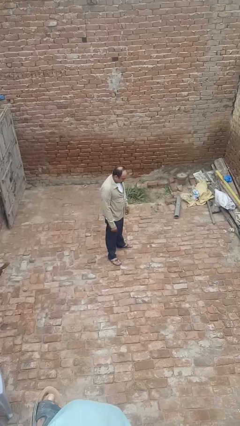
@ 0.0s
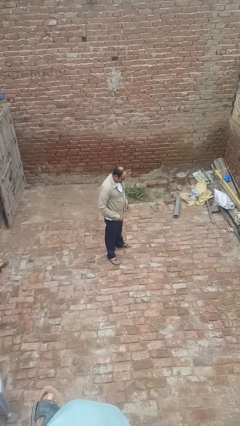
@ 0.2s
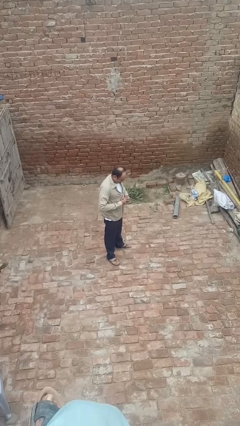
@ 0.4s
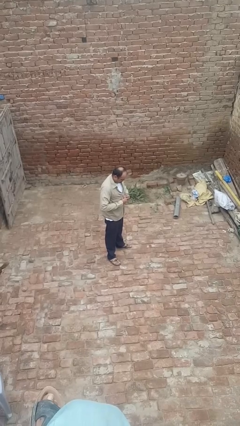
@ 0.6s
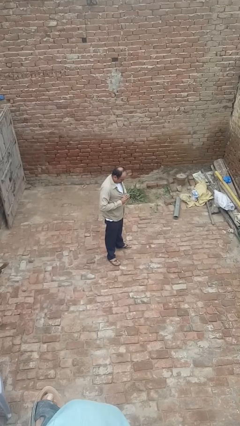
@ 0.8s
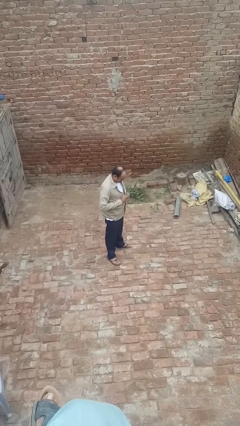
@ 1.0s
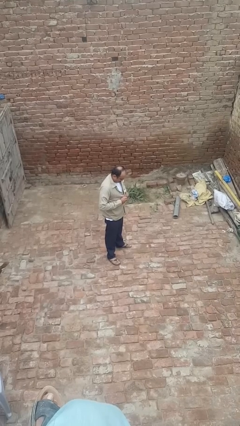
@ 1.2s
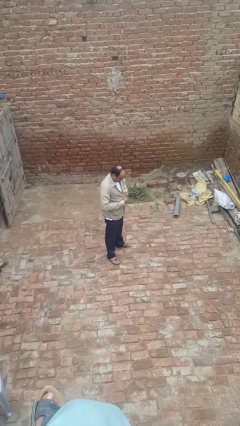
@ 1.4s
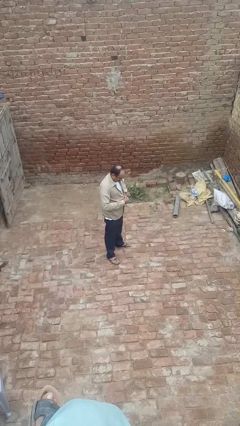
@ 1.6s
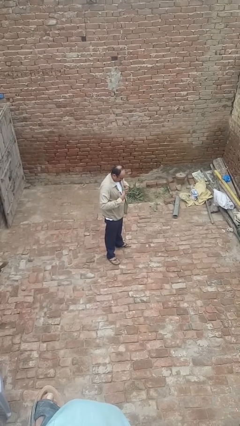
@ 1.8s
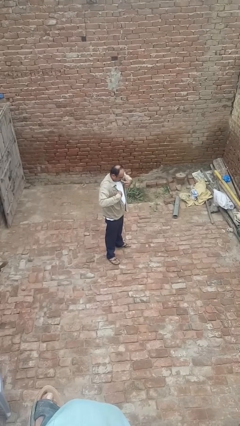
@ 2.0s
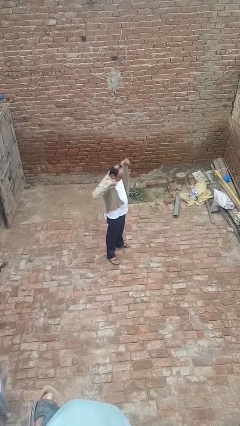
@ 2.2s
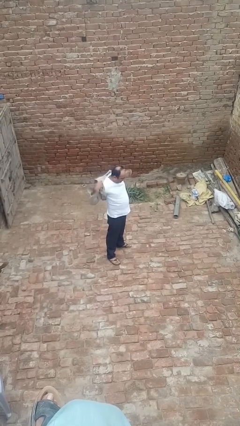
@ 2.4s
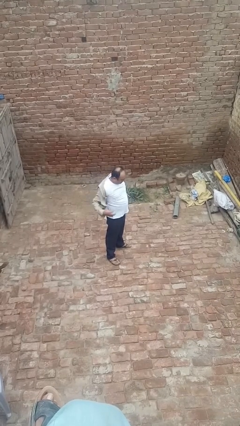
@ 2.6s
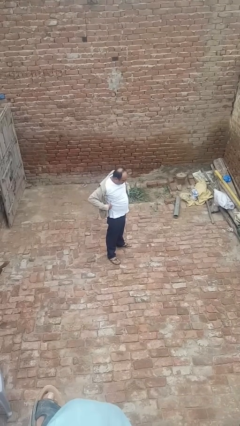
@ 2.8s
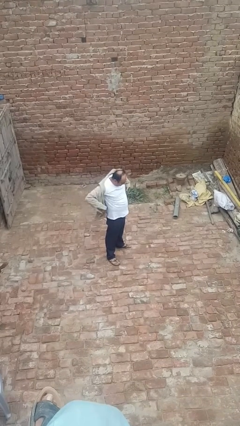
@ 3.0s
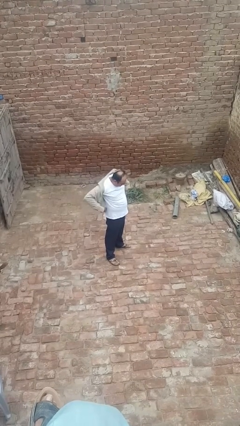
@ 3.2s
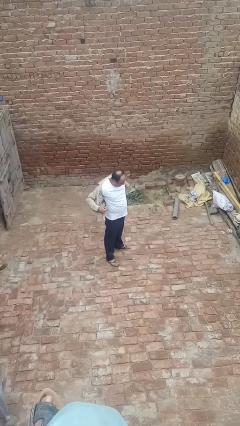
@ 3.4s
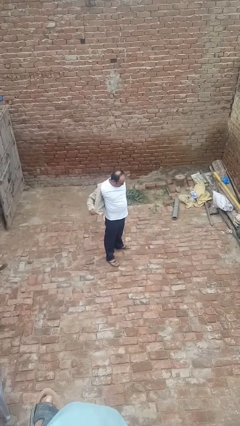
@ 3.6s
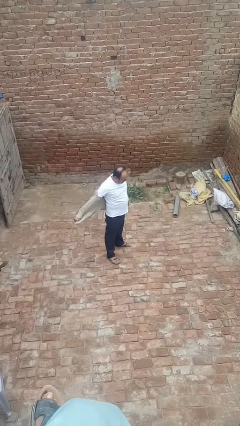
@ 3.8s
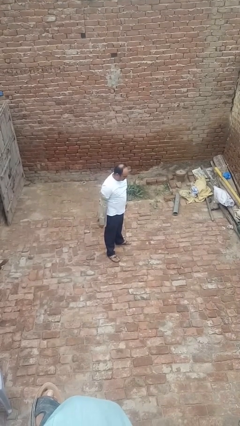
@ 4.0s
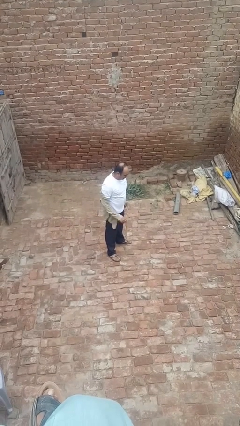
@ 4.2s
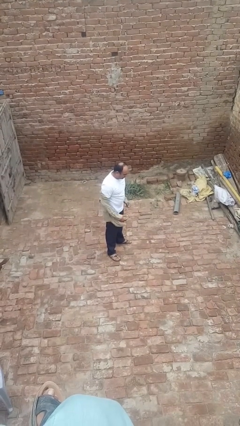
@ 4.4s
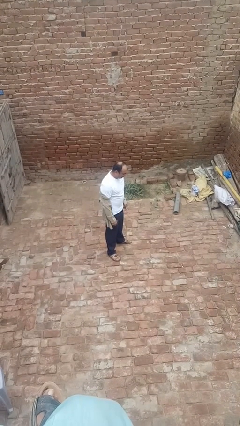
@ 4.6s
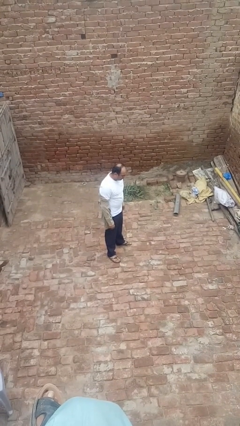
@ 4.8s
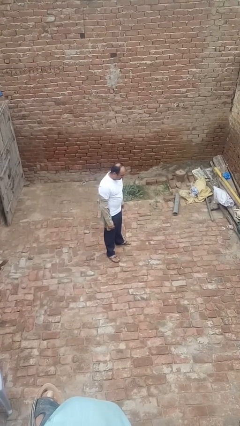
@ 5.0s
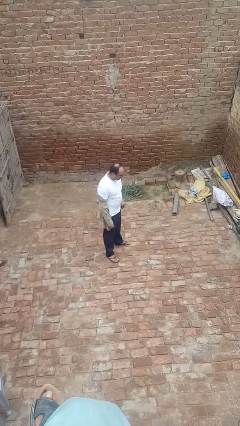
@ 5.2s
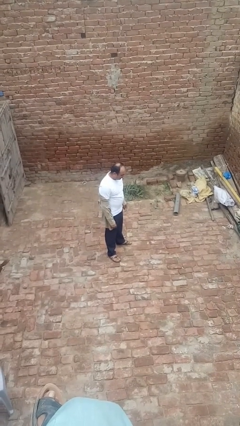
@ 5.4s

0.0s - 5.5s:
person takes off shirt

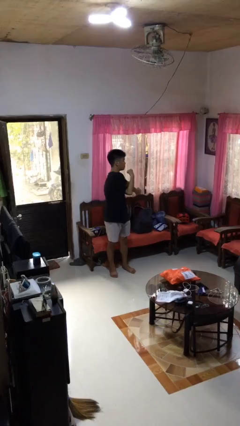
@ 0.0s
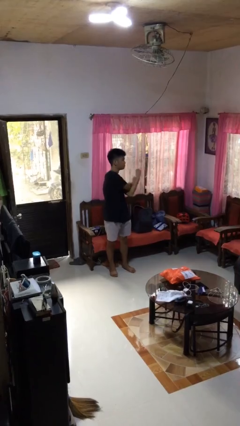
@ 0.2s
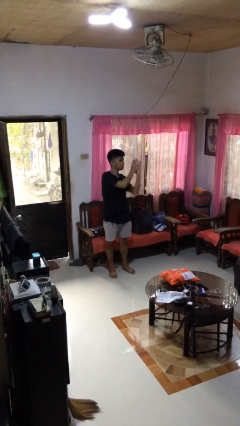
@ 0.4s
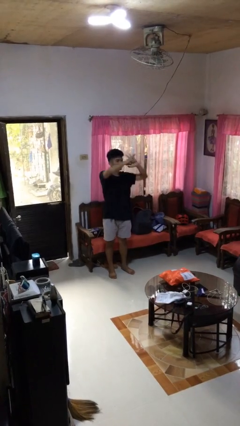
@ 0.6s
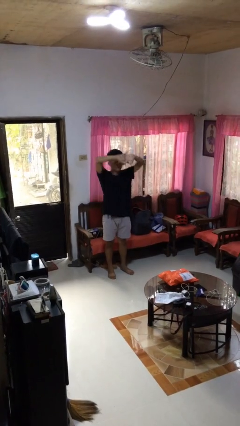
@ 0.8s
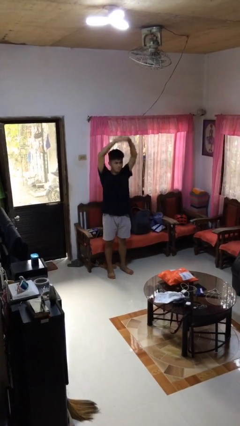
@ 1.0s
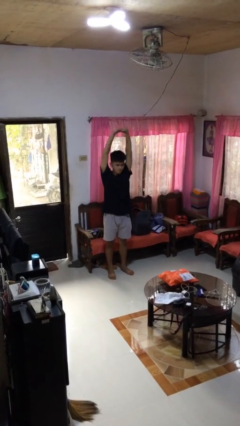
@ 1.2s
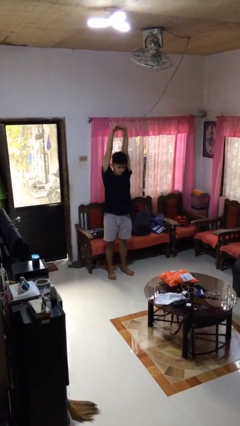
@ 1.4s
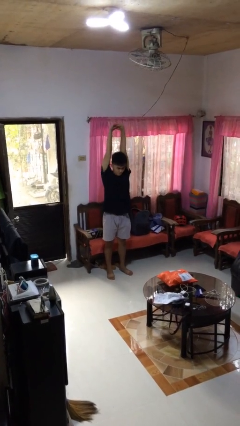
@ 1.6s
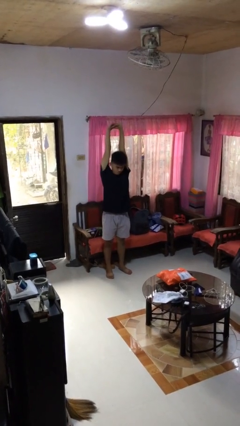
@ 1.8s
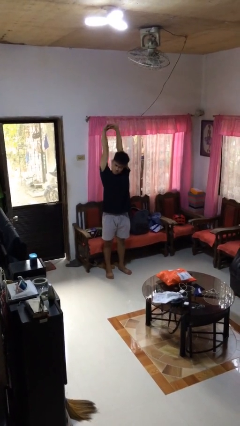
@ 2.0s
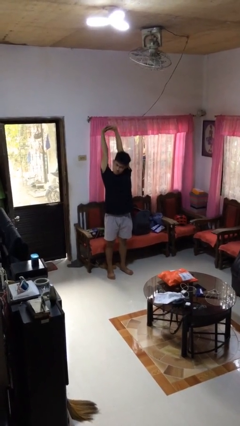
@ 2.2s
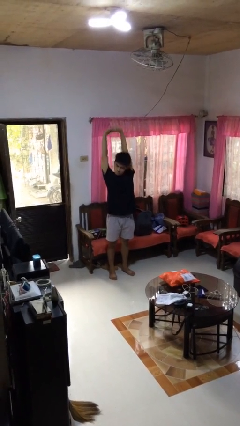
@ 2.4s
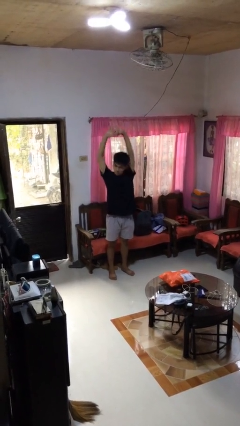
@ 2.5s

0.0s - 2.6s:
person stretches arms over head

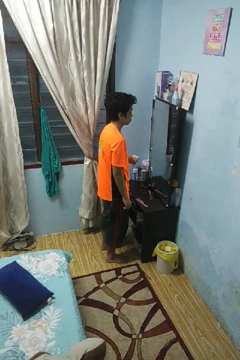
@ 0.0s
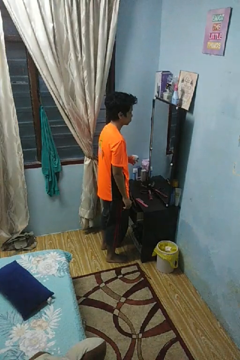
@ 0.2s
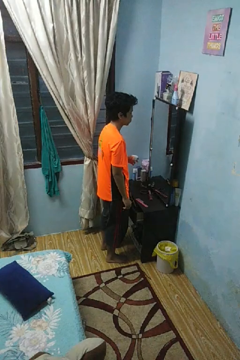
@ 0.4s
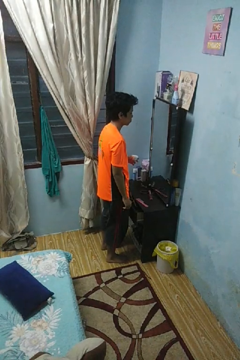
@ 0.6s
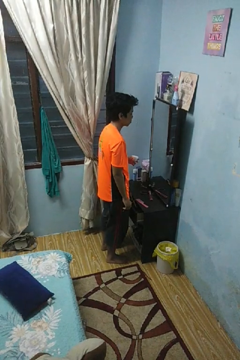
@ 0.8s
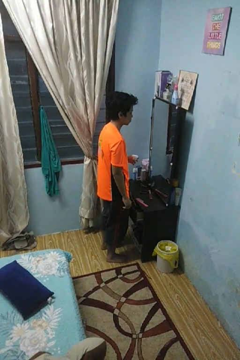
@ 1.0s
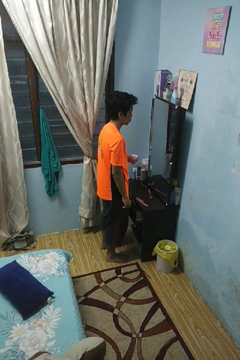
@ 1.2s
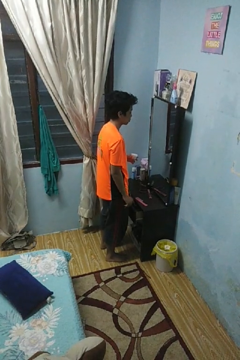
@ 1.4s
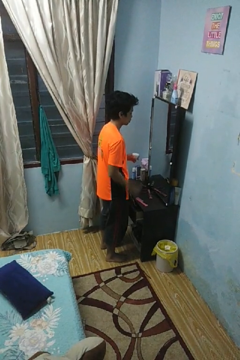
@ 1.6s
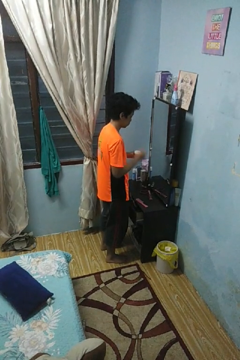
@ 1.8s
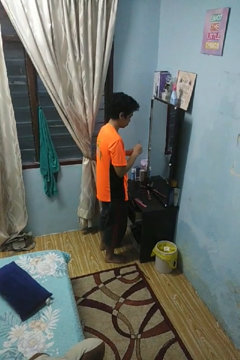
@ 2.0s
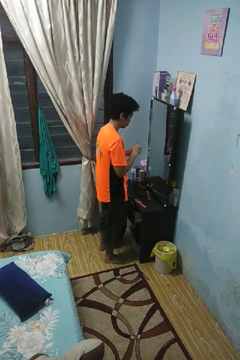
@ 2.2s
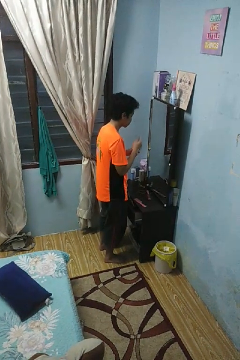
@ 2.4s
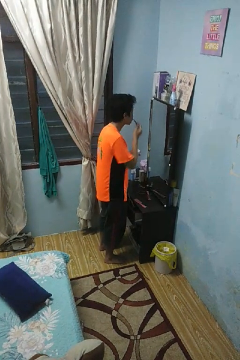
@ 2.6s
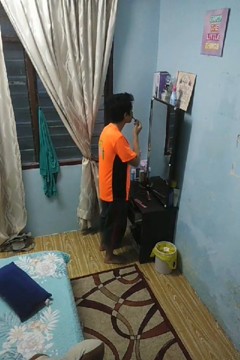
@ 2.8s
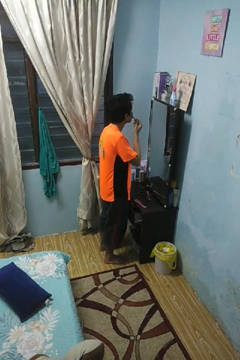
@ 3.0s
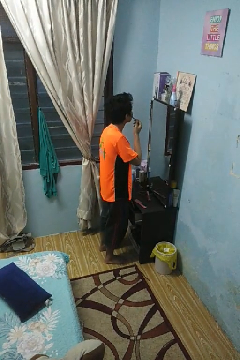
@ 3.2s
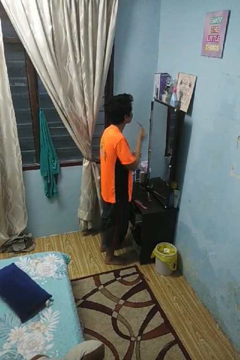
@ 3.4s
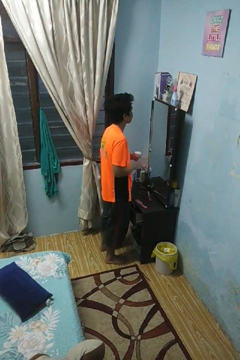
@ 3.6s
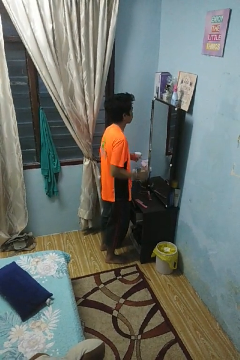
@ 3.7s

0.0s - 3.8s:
person applies foundation makeup

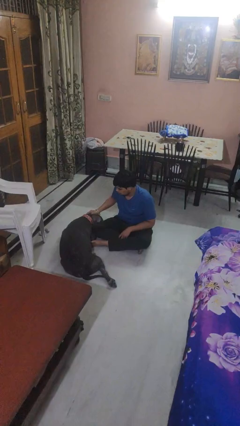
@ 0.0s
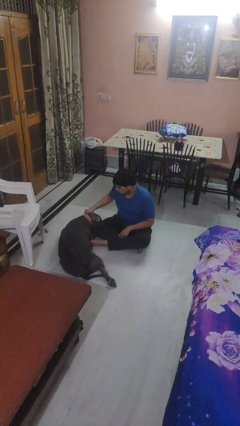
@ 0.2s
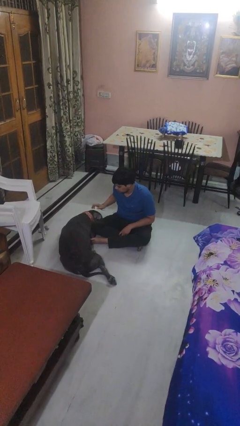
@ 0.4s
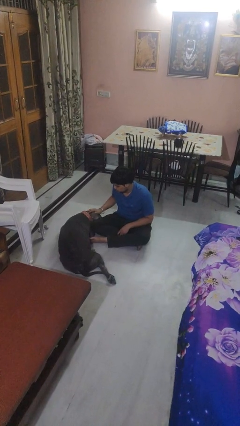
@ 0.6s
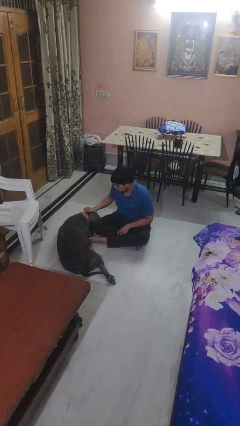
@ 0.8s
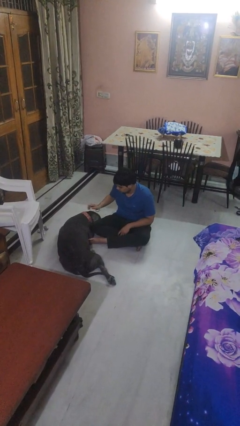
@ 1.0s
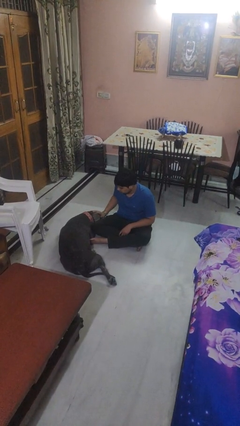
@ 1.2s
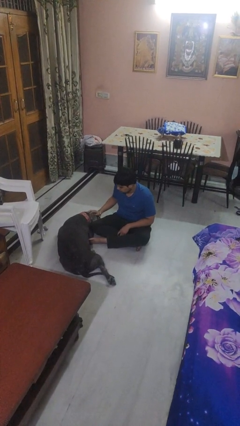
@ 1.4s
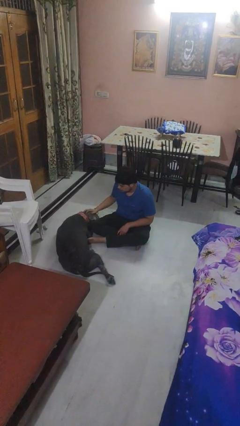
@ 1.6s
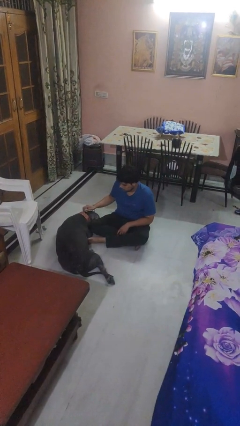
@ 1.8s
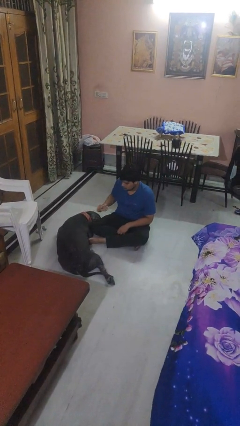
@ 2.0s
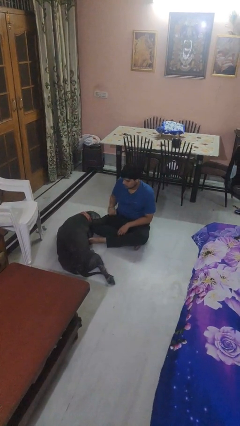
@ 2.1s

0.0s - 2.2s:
person pets dog

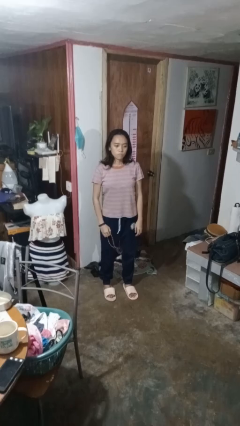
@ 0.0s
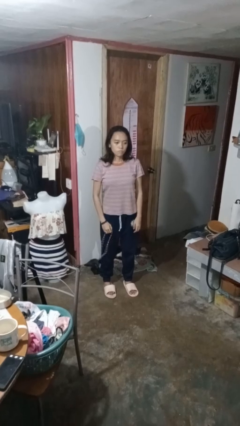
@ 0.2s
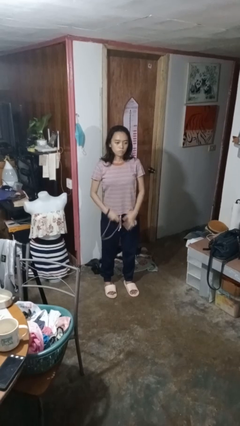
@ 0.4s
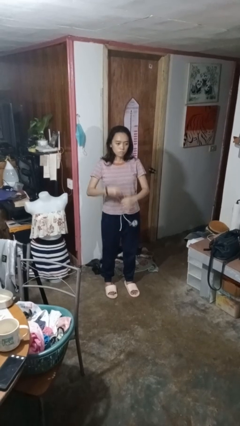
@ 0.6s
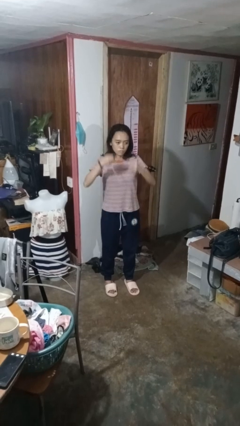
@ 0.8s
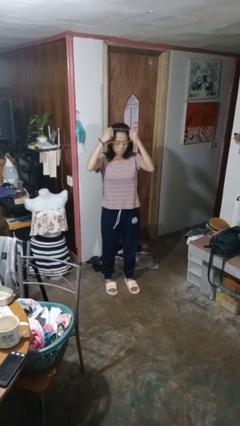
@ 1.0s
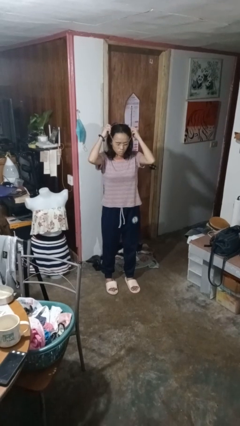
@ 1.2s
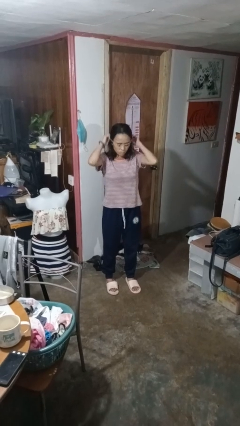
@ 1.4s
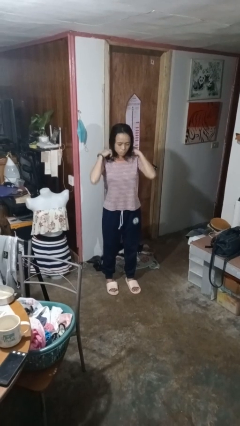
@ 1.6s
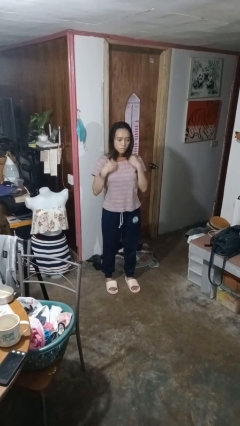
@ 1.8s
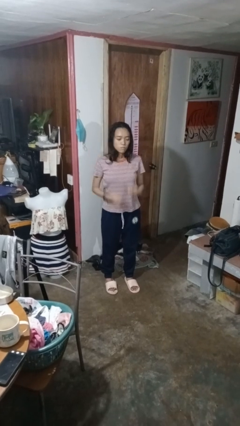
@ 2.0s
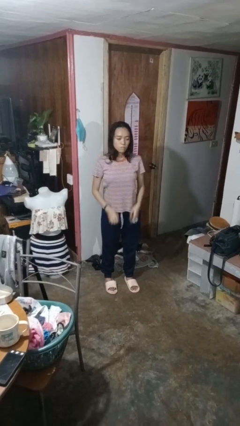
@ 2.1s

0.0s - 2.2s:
person puts on necklace

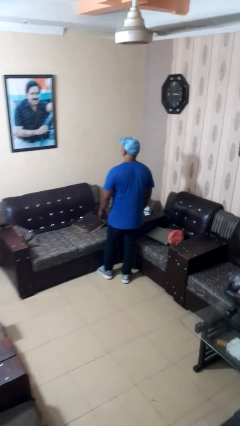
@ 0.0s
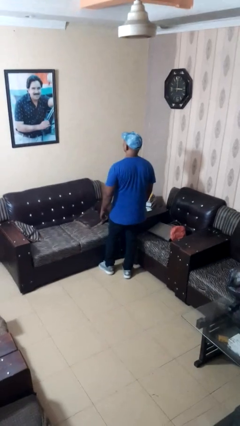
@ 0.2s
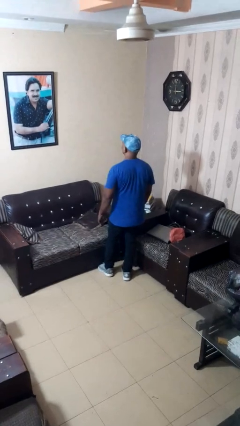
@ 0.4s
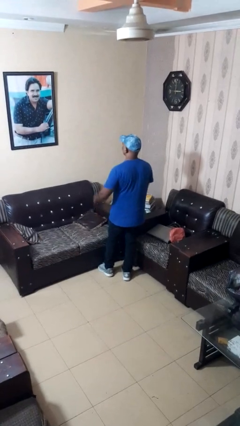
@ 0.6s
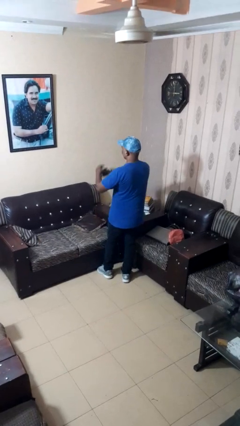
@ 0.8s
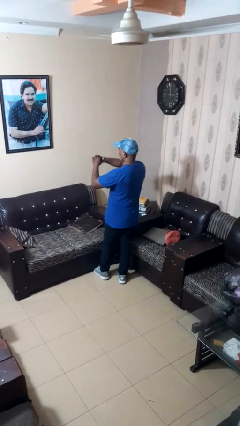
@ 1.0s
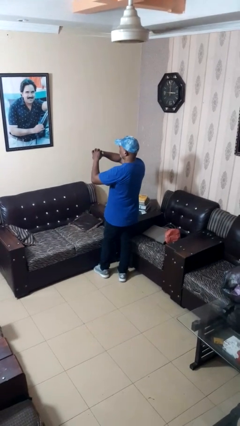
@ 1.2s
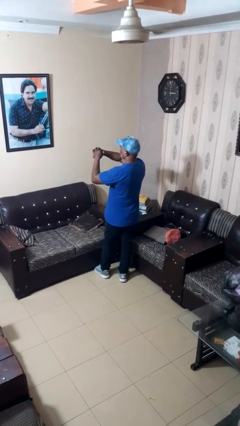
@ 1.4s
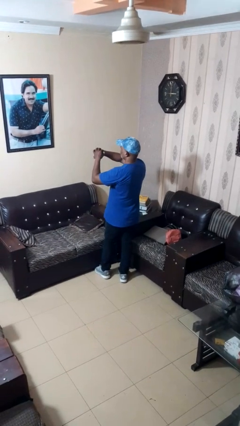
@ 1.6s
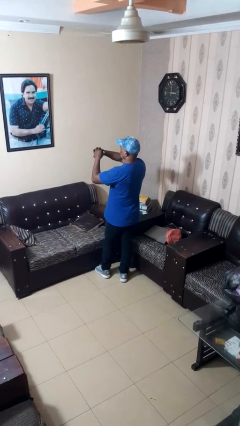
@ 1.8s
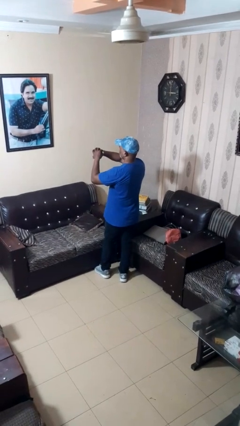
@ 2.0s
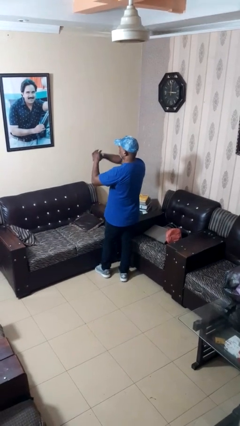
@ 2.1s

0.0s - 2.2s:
person looks at wristwatch
